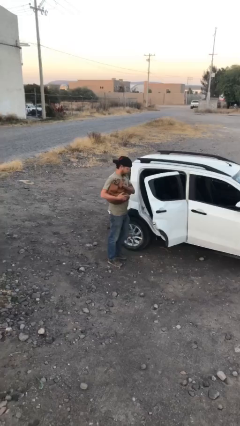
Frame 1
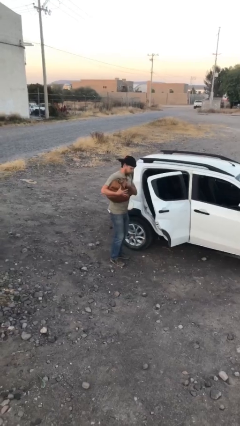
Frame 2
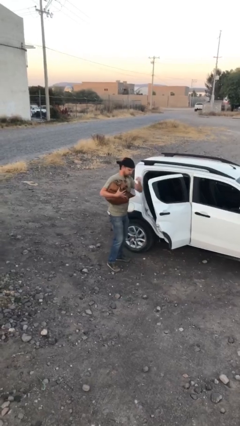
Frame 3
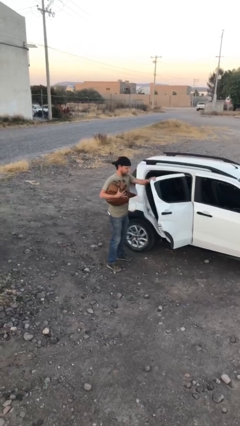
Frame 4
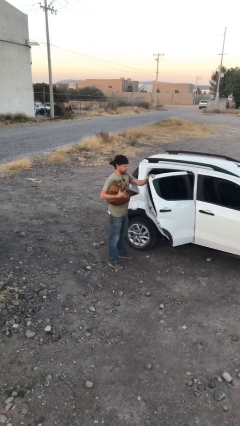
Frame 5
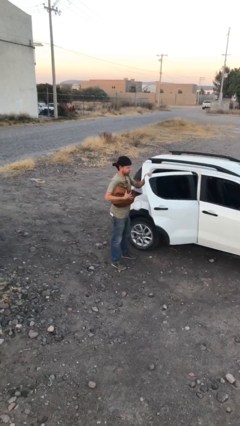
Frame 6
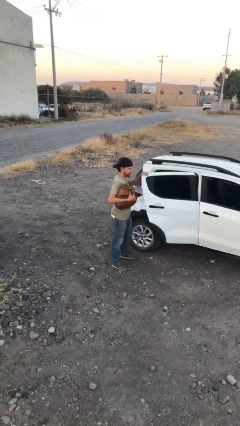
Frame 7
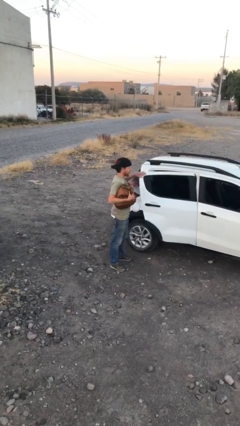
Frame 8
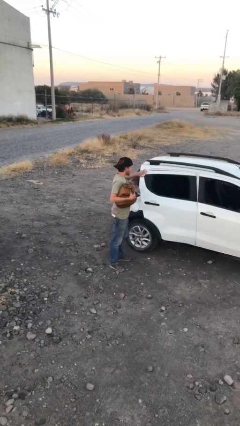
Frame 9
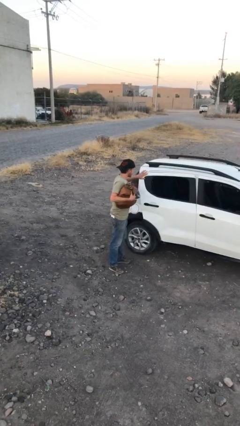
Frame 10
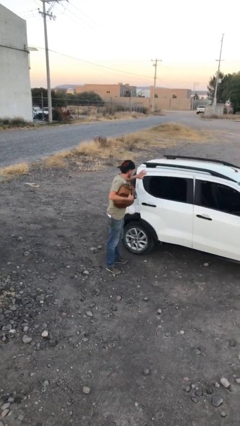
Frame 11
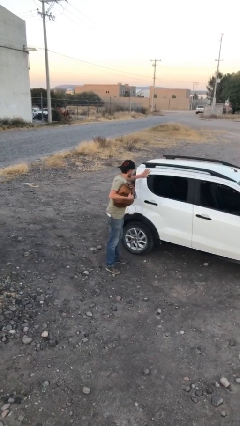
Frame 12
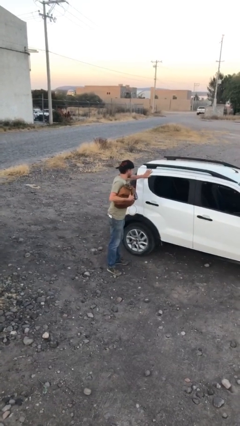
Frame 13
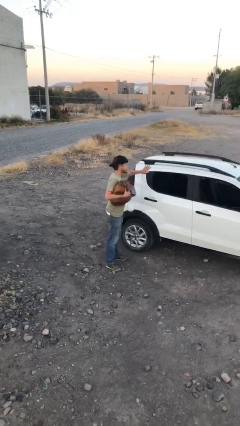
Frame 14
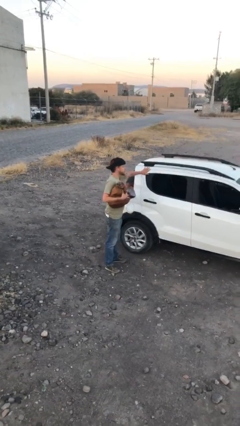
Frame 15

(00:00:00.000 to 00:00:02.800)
person closes car door

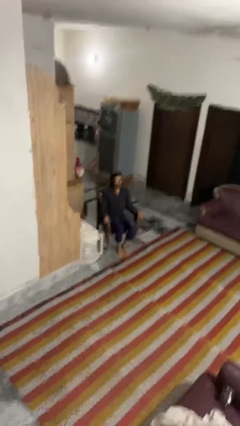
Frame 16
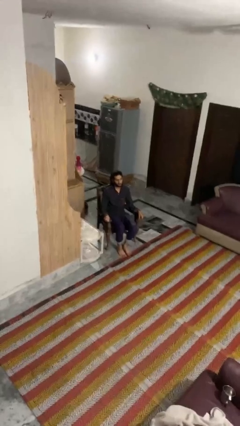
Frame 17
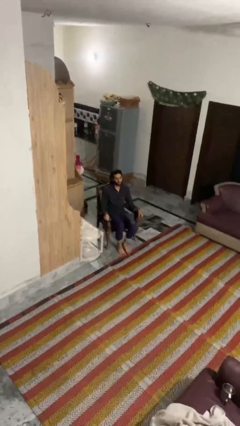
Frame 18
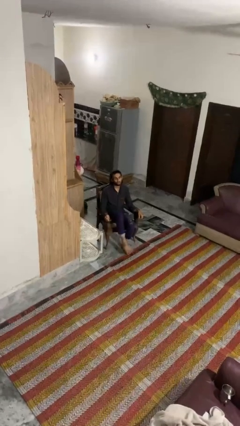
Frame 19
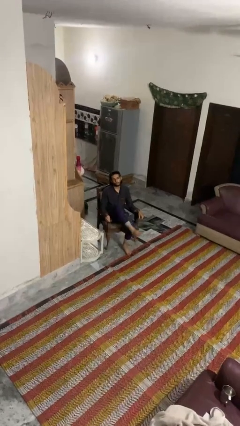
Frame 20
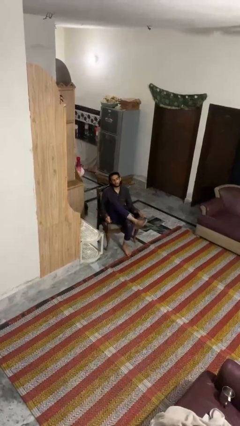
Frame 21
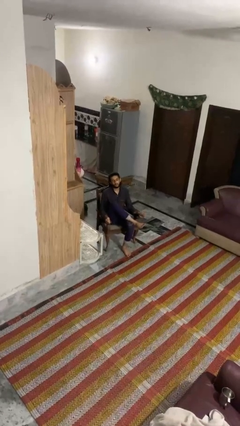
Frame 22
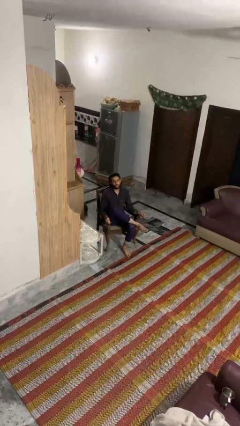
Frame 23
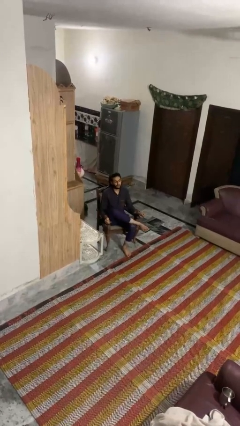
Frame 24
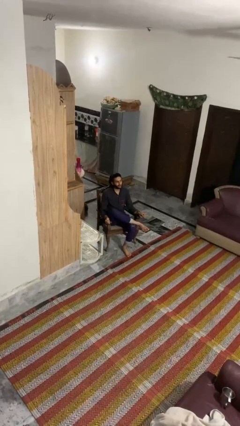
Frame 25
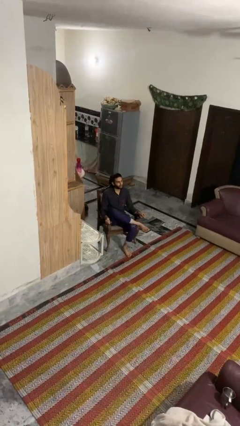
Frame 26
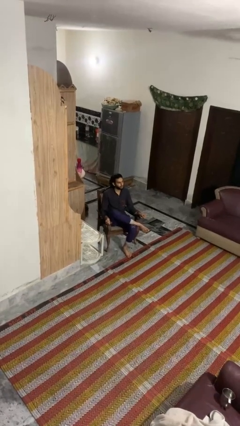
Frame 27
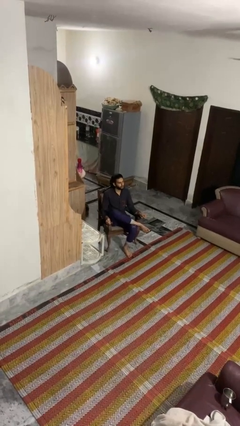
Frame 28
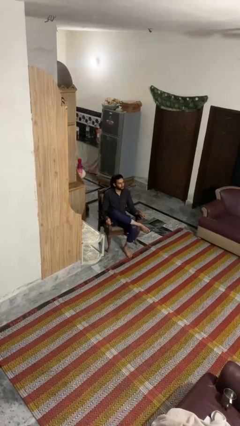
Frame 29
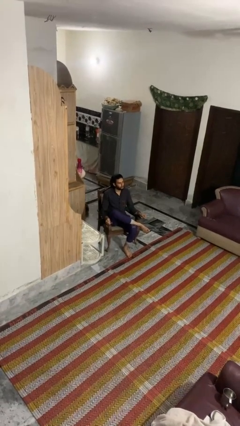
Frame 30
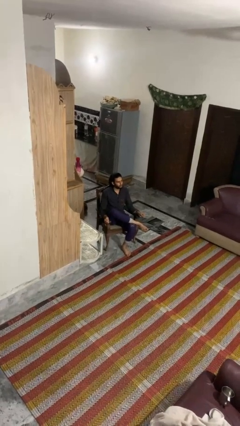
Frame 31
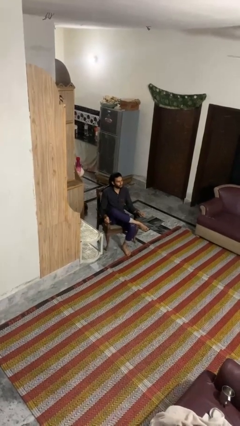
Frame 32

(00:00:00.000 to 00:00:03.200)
person crosses legs

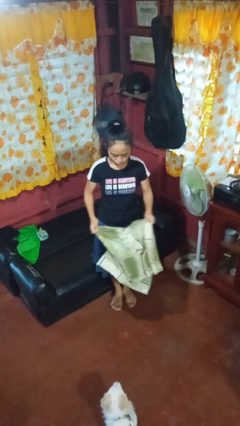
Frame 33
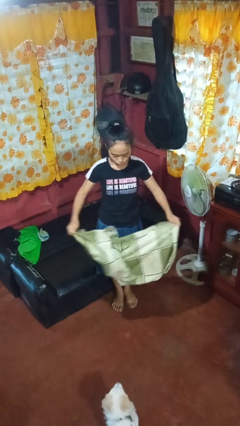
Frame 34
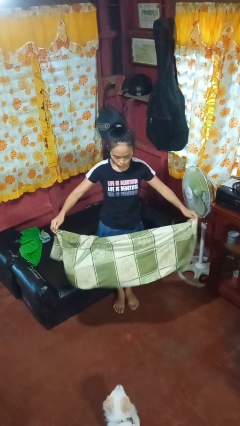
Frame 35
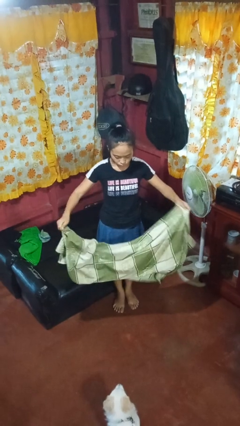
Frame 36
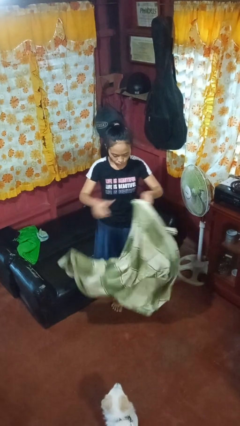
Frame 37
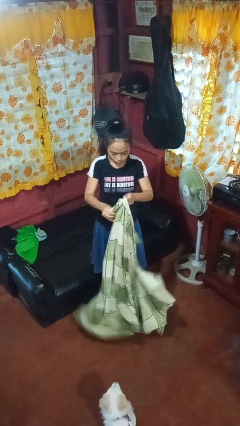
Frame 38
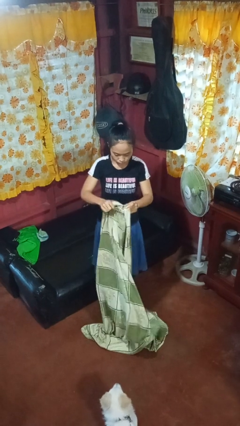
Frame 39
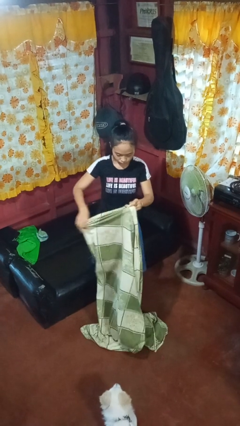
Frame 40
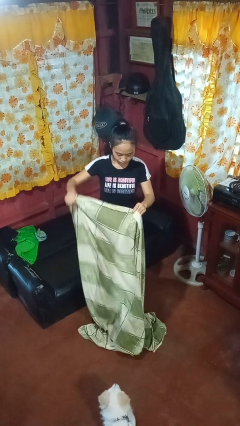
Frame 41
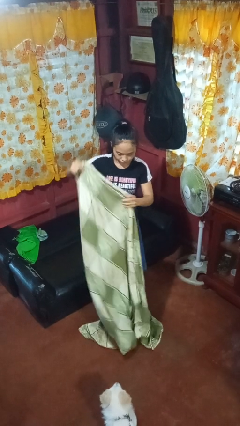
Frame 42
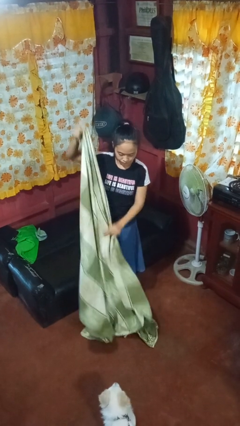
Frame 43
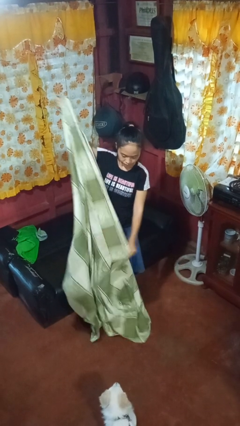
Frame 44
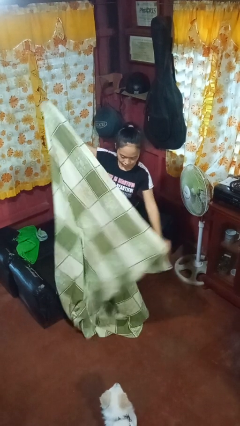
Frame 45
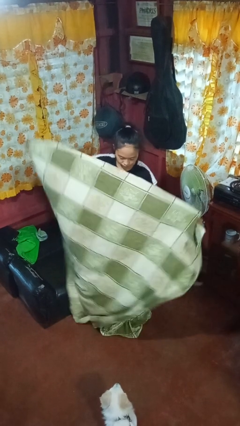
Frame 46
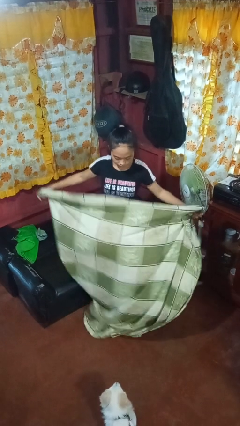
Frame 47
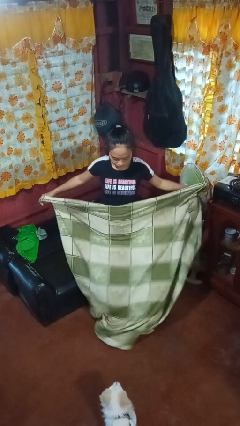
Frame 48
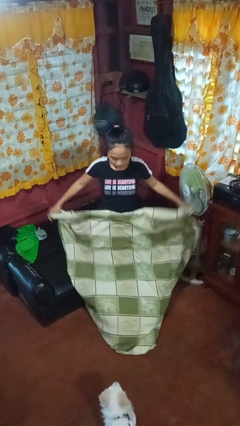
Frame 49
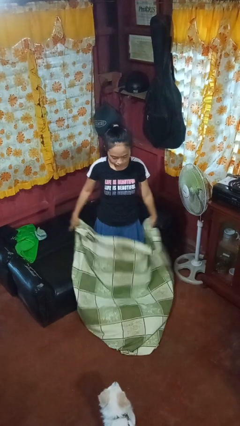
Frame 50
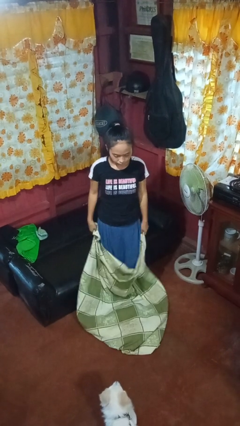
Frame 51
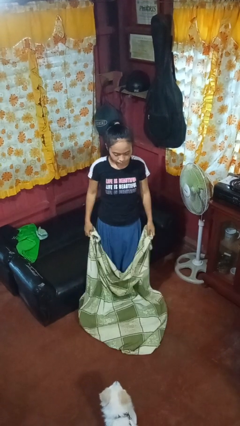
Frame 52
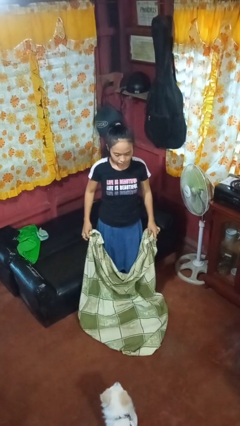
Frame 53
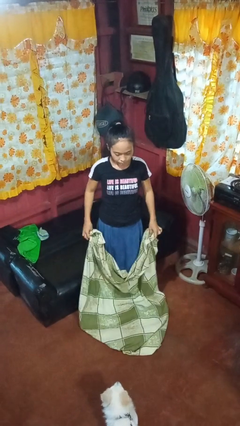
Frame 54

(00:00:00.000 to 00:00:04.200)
person unfolds blanket

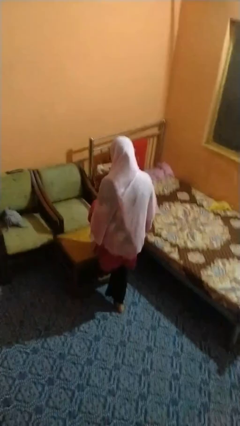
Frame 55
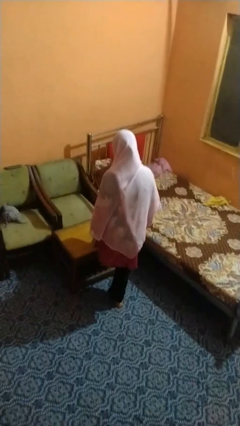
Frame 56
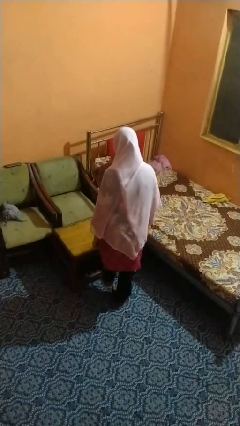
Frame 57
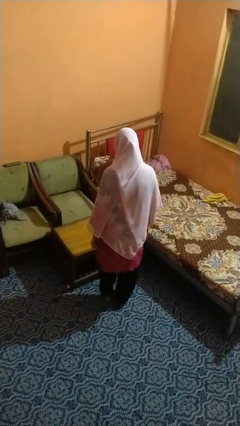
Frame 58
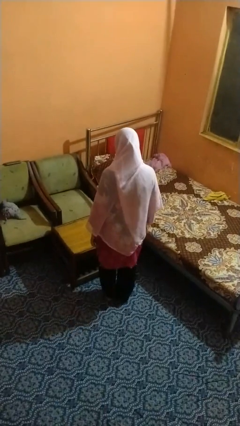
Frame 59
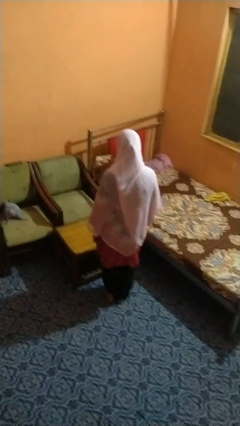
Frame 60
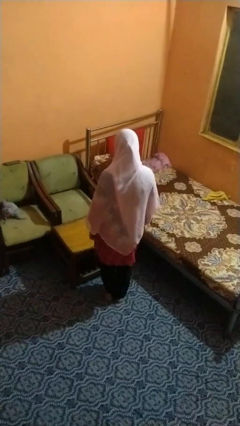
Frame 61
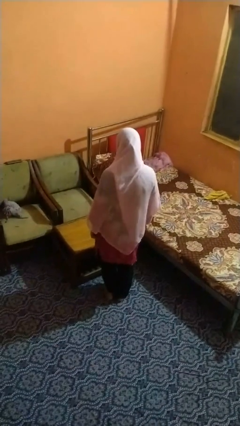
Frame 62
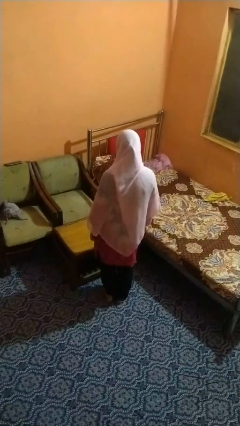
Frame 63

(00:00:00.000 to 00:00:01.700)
person climbs off table

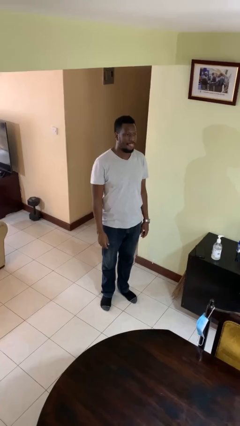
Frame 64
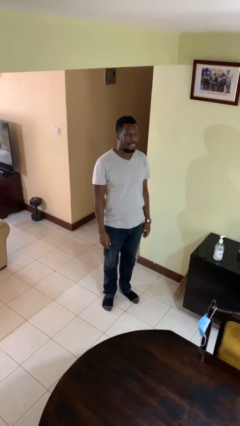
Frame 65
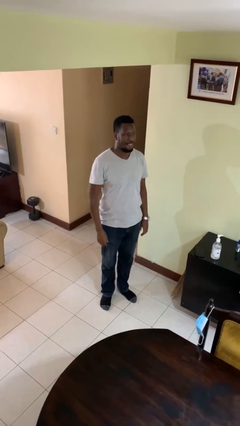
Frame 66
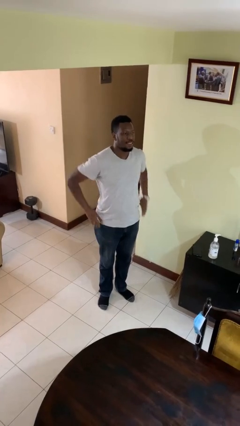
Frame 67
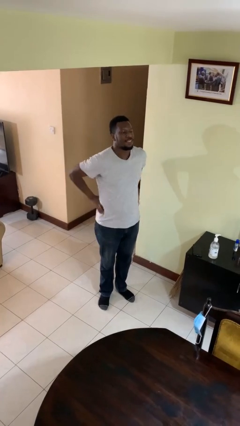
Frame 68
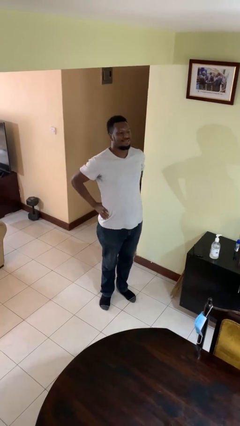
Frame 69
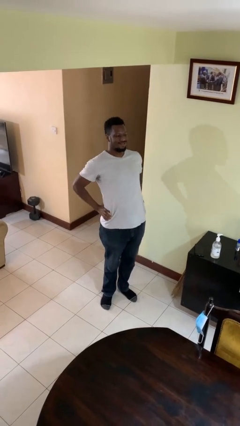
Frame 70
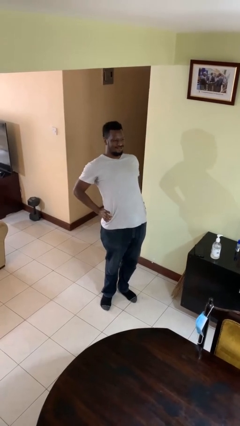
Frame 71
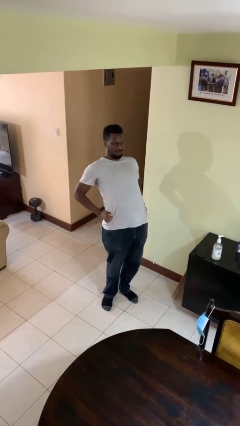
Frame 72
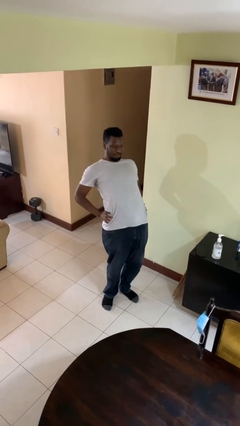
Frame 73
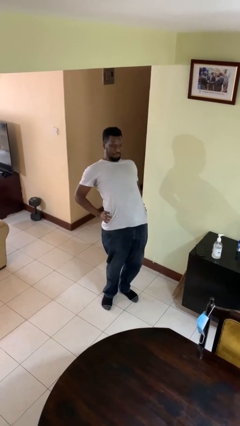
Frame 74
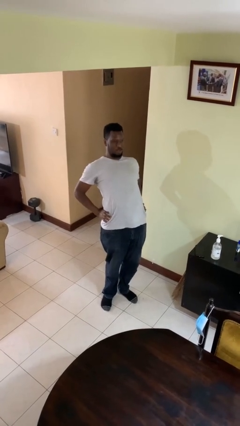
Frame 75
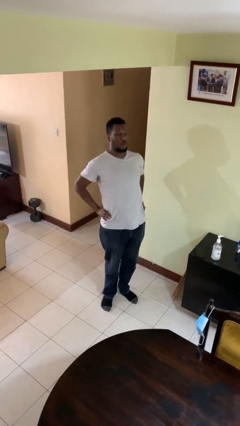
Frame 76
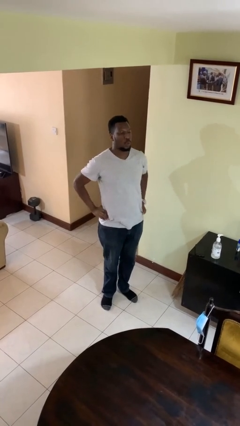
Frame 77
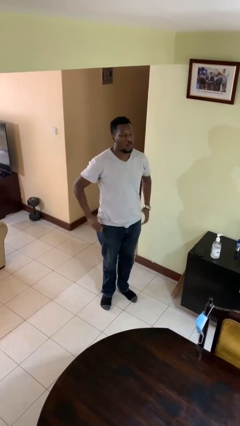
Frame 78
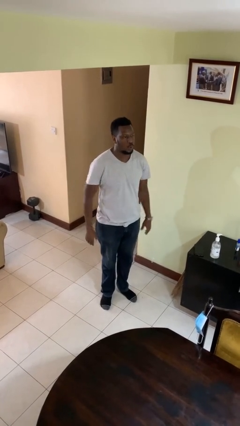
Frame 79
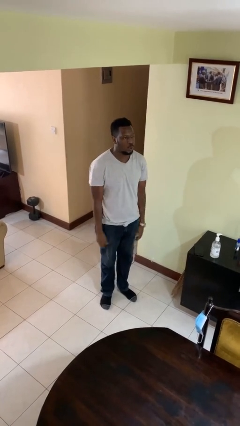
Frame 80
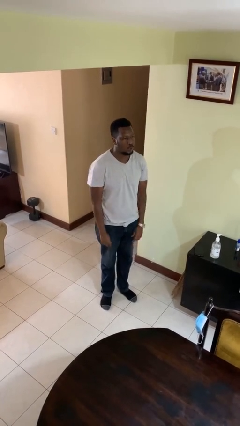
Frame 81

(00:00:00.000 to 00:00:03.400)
person stretches back

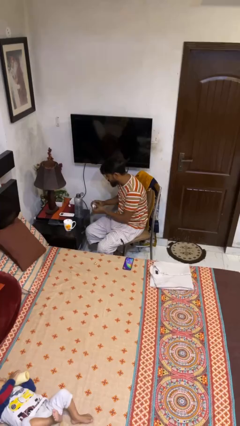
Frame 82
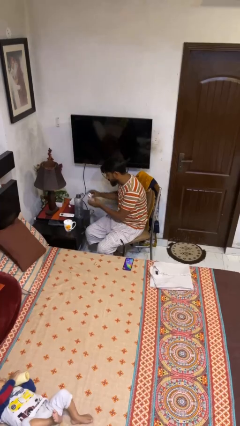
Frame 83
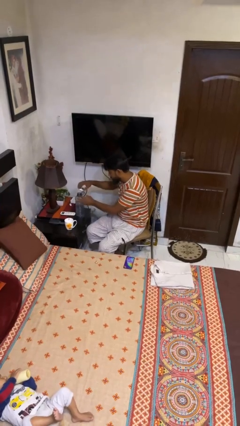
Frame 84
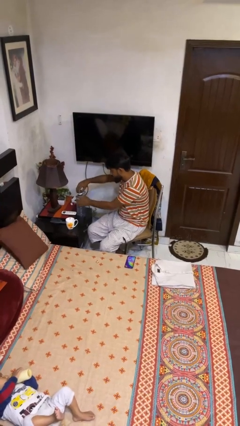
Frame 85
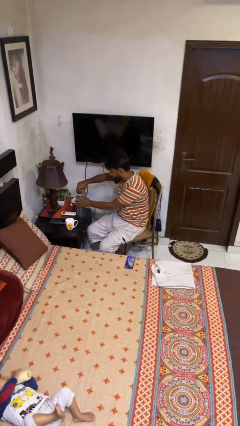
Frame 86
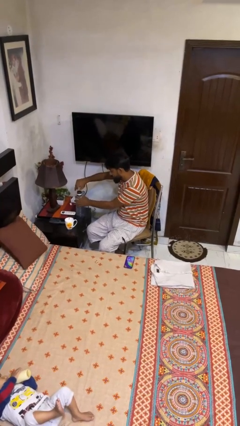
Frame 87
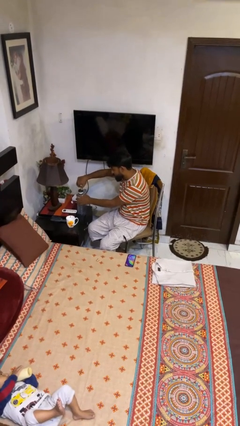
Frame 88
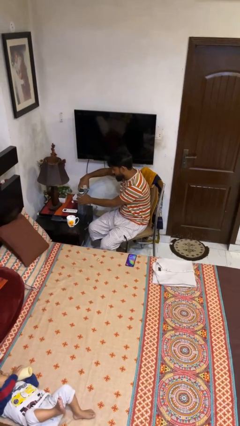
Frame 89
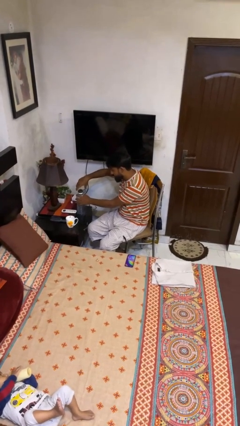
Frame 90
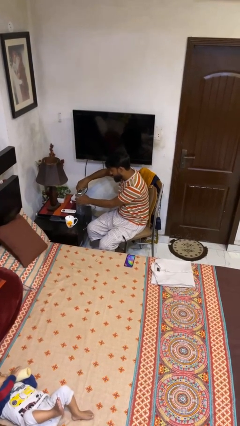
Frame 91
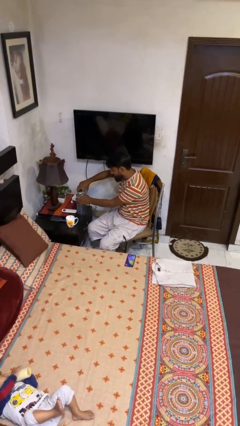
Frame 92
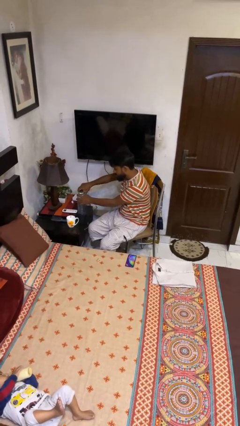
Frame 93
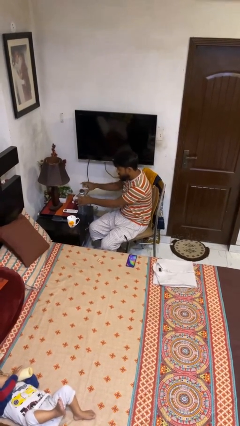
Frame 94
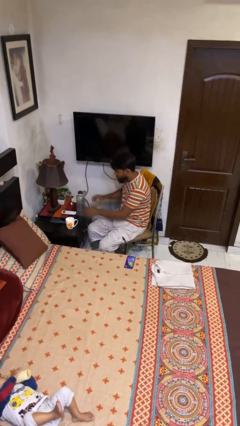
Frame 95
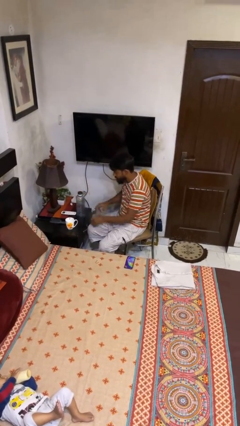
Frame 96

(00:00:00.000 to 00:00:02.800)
person screws lid to bottle
